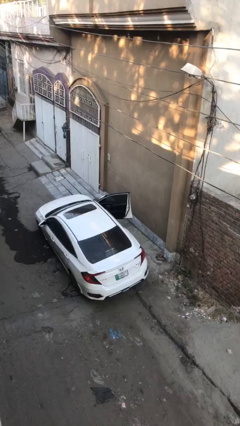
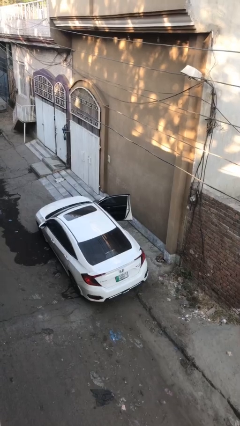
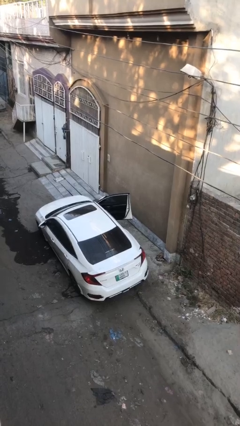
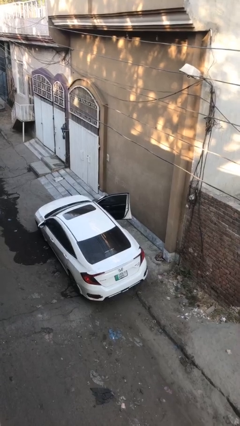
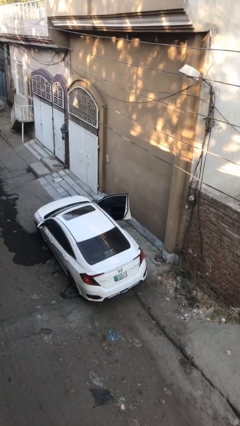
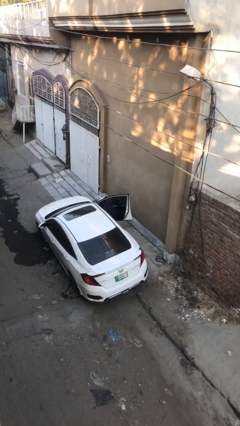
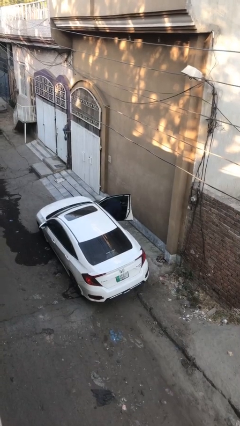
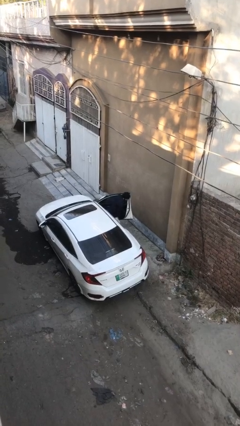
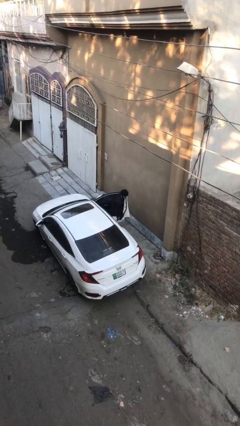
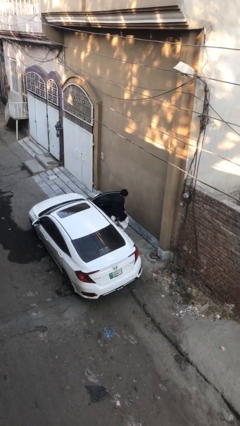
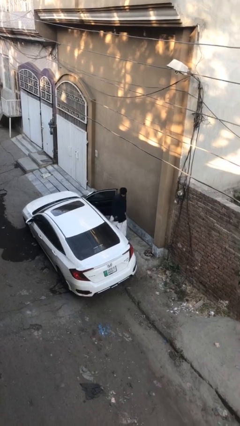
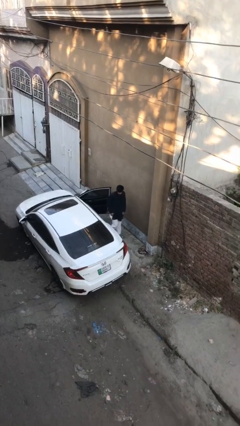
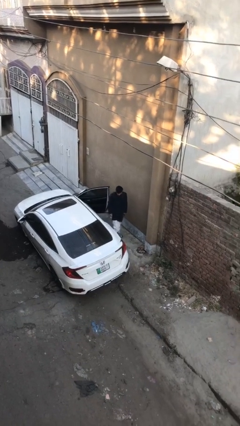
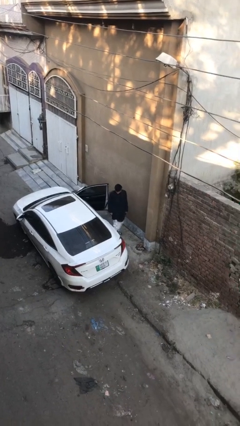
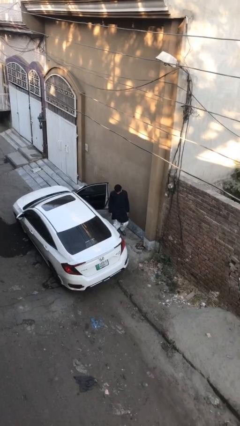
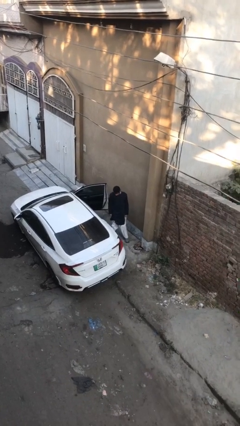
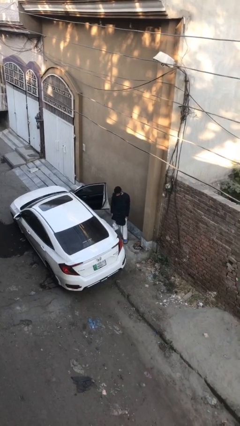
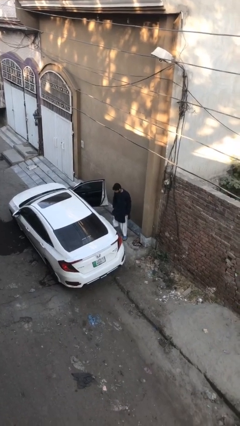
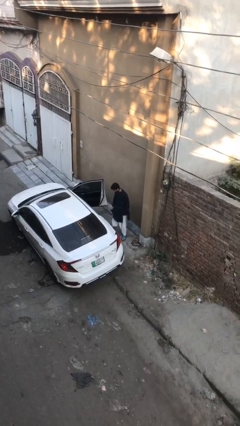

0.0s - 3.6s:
person exits car

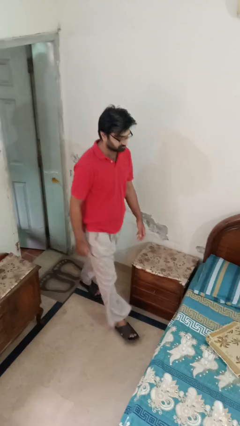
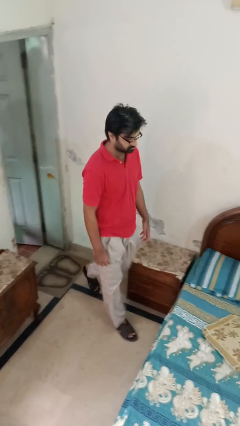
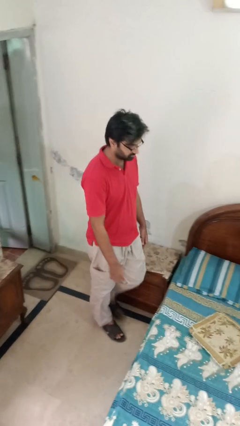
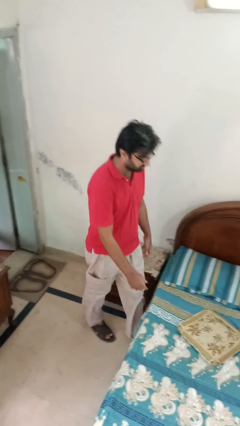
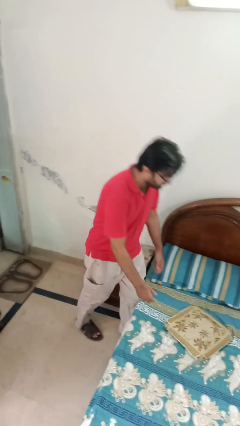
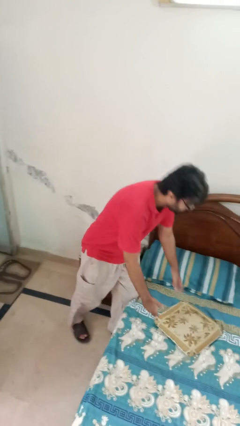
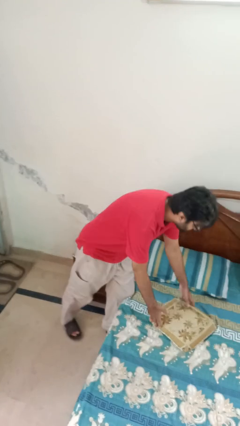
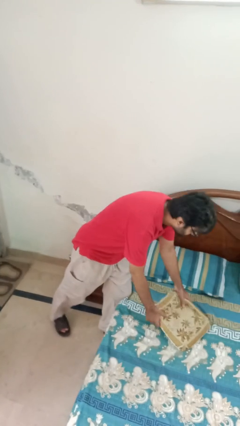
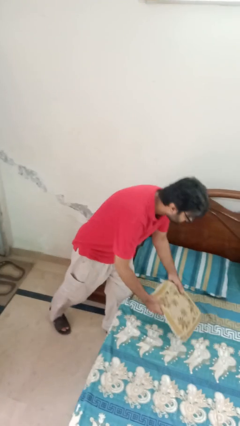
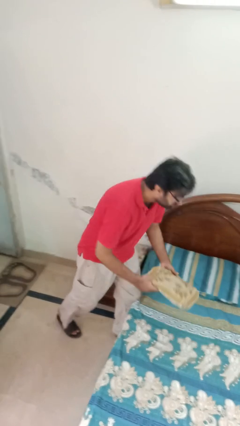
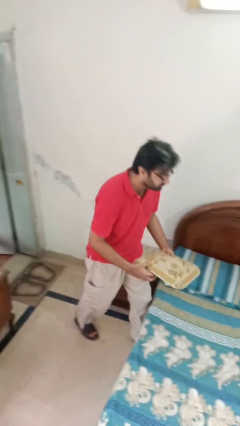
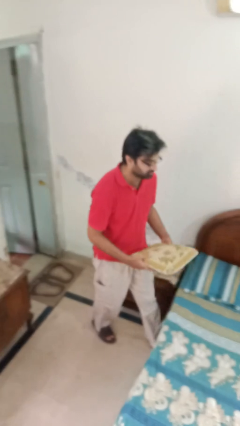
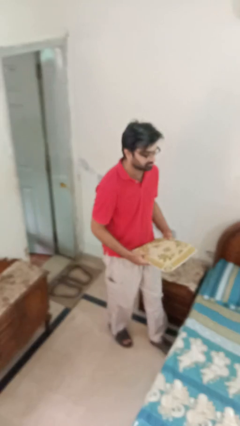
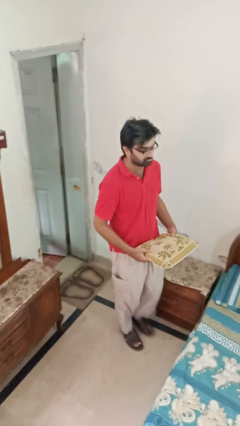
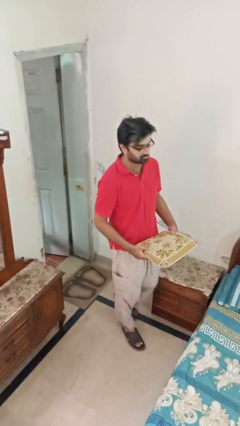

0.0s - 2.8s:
person picks up object from bed

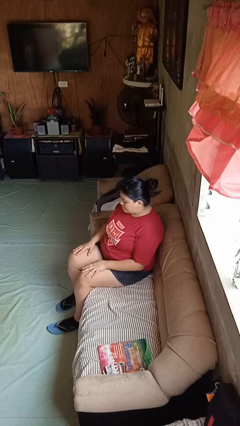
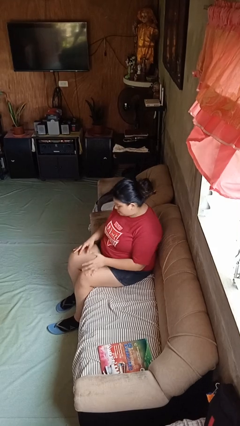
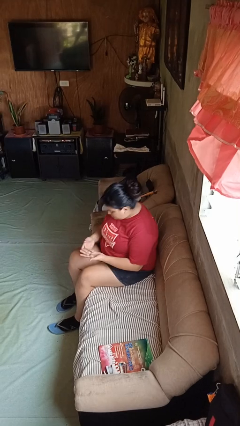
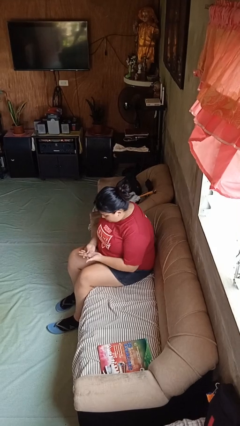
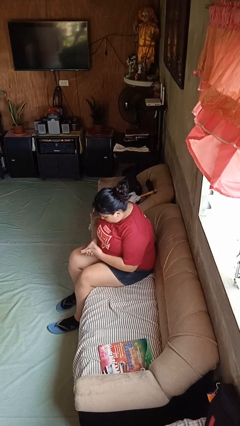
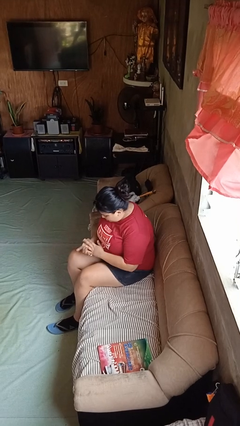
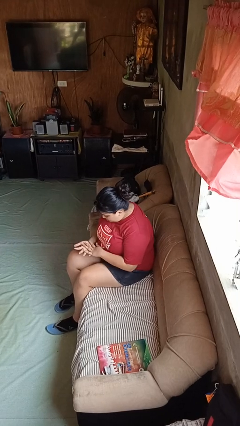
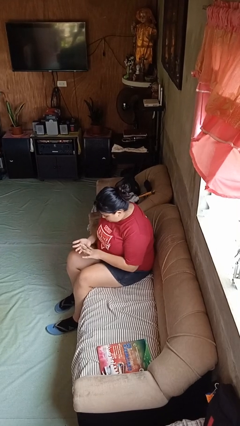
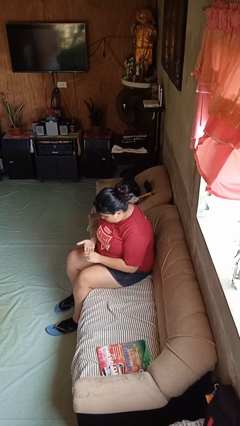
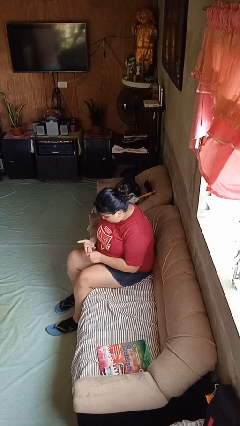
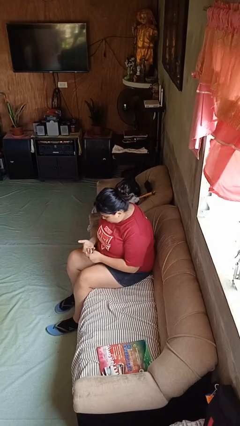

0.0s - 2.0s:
person looks at hands in lap

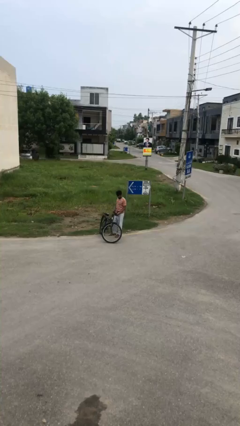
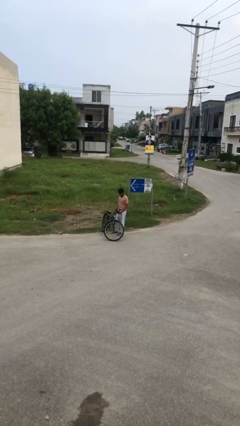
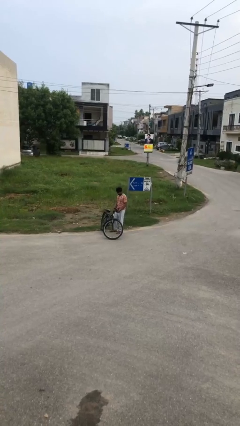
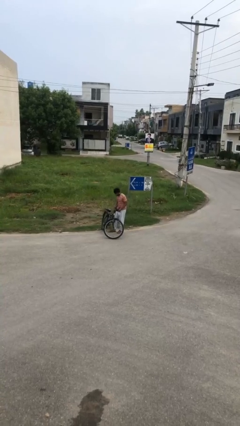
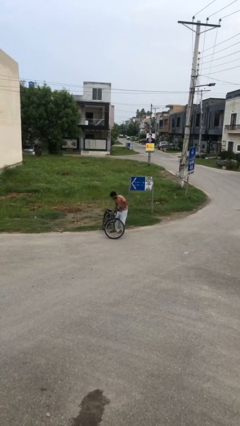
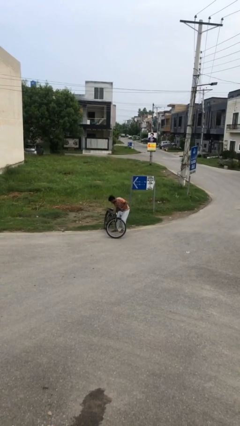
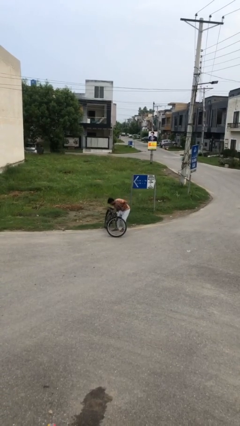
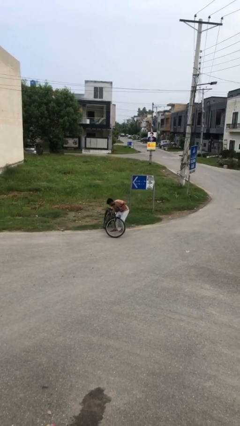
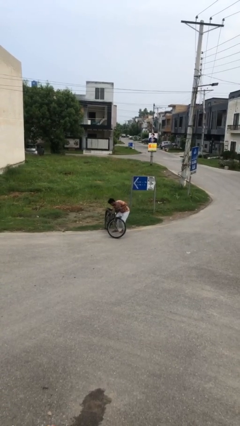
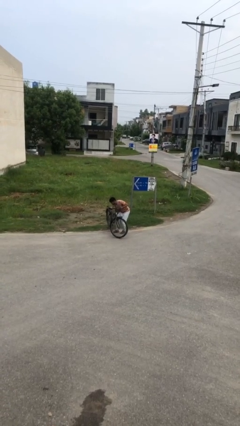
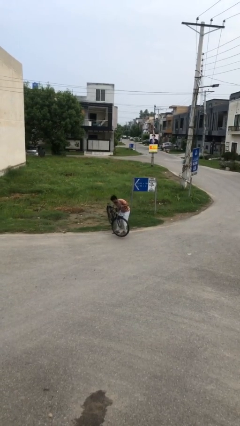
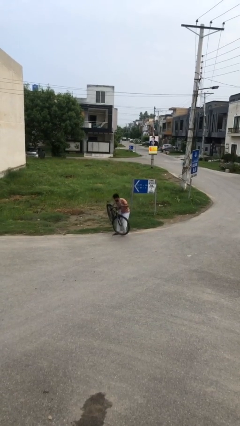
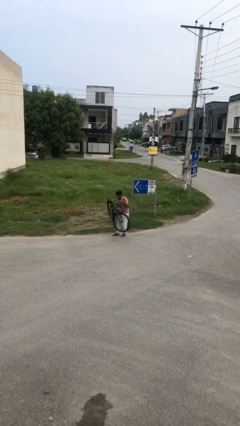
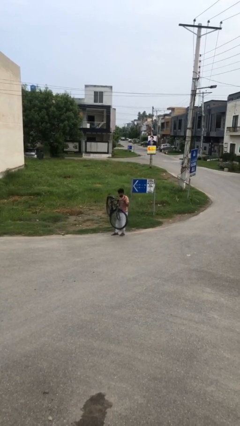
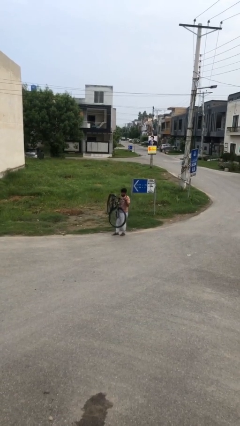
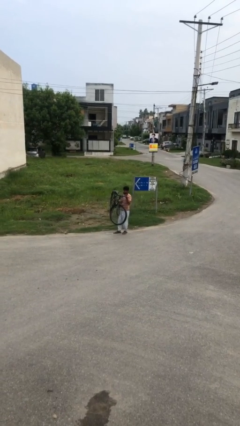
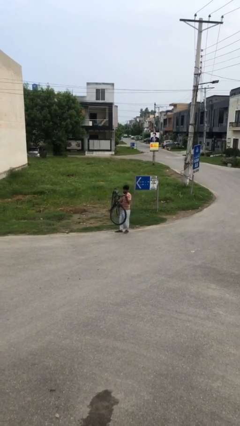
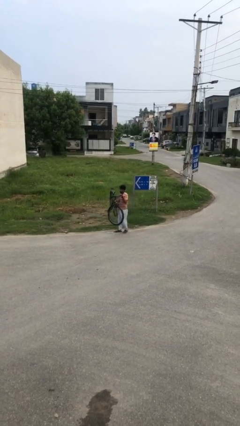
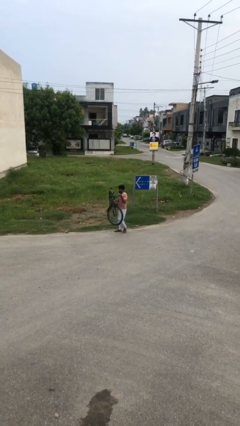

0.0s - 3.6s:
person picks up object from floor

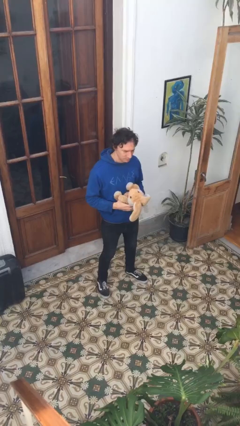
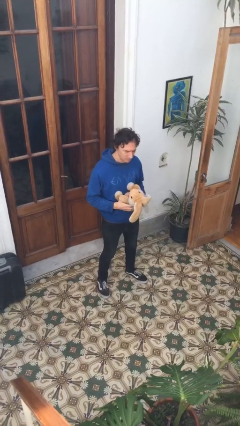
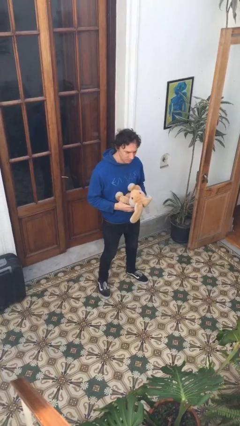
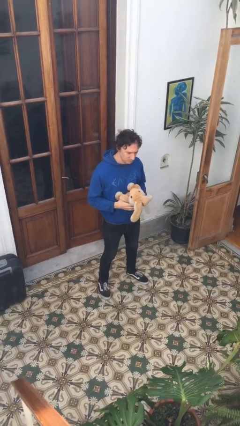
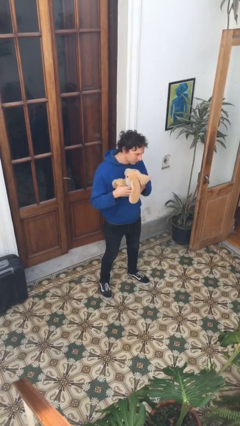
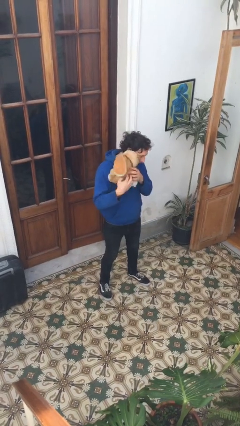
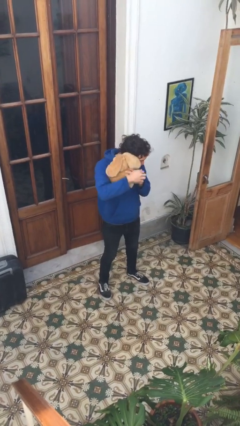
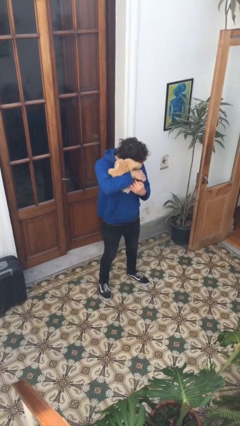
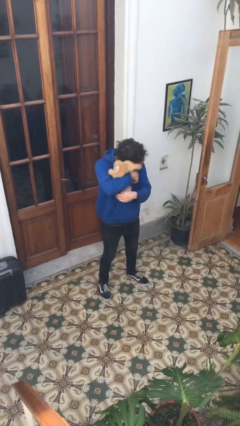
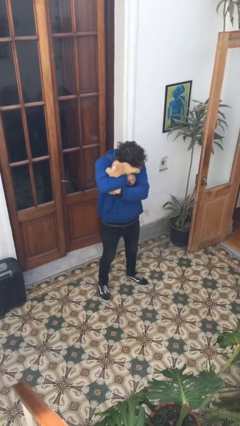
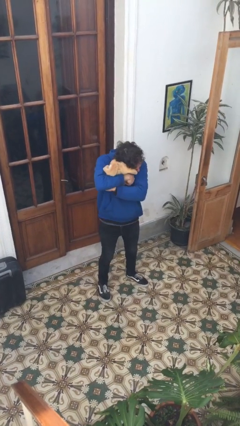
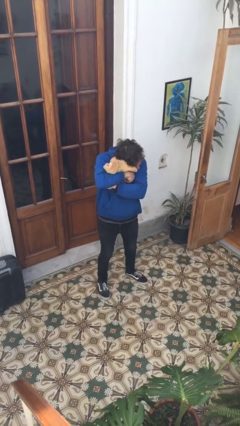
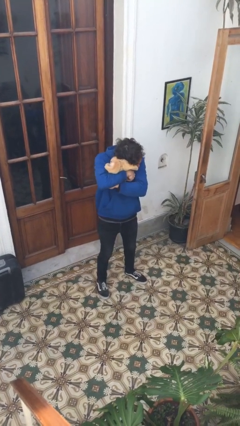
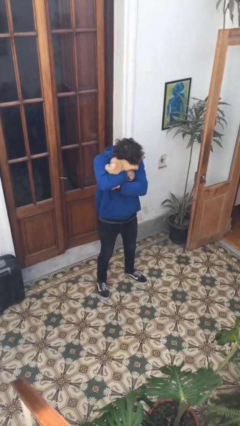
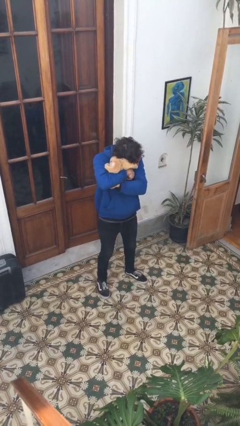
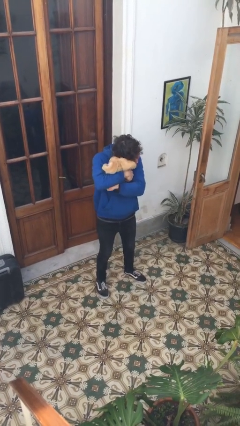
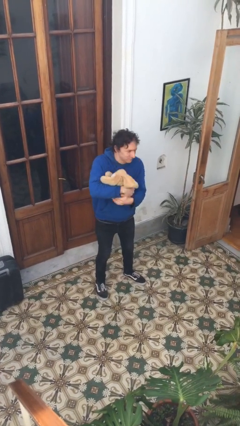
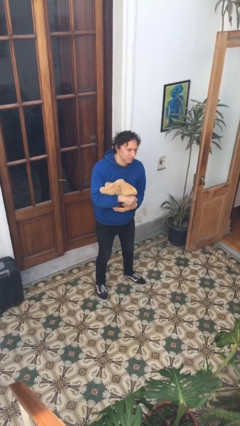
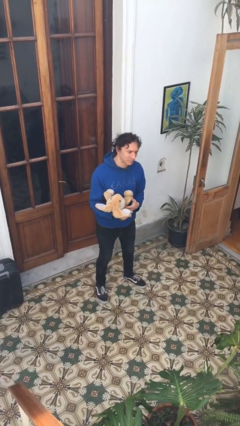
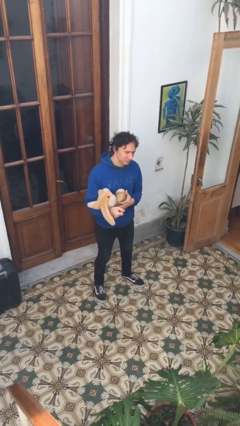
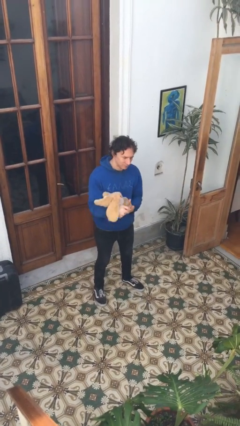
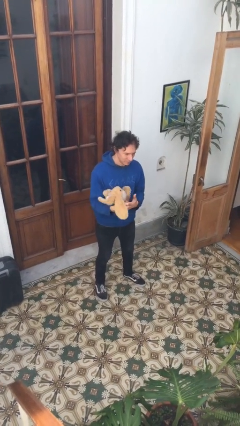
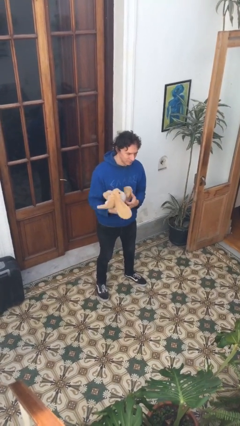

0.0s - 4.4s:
person hugs stuffed animal

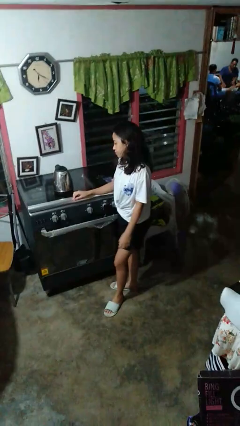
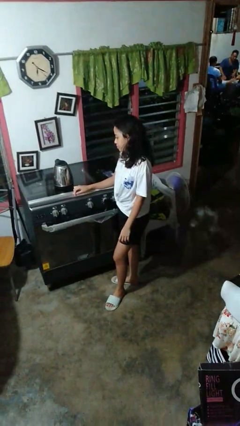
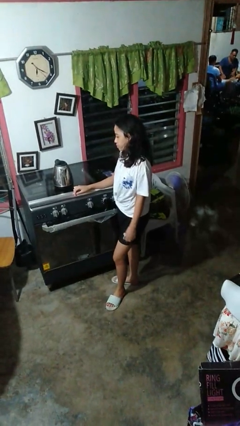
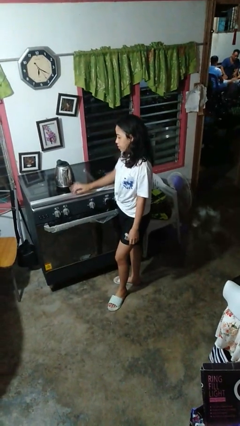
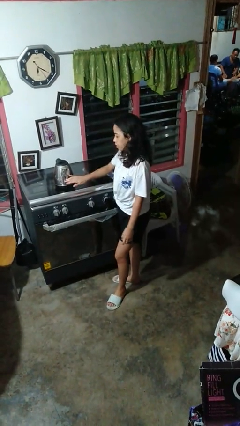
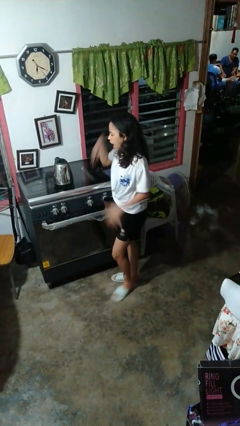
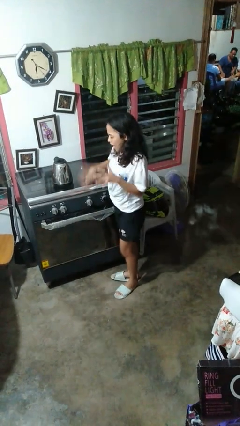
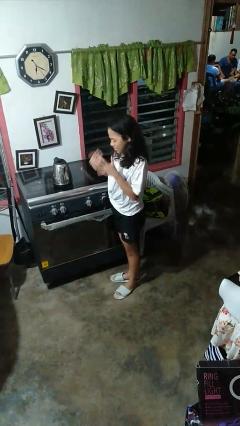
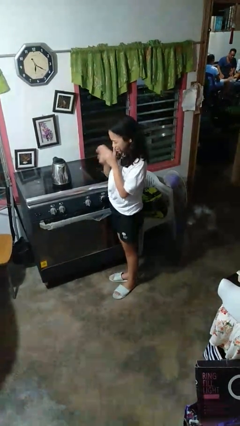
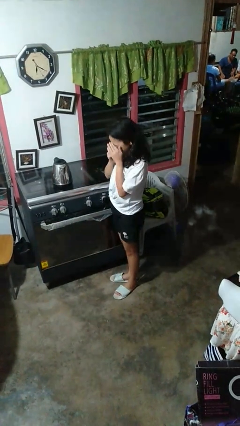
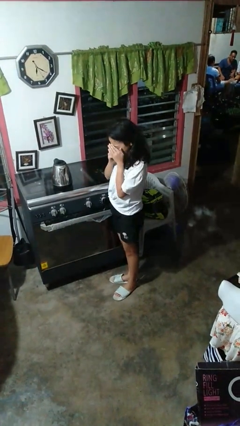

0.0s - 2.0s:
person burns hand
